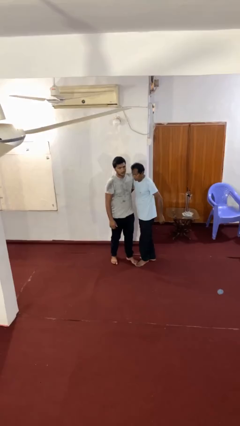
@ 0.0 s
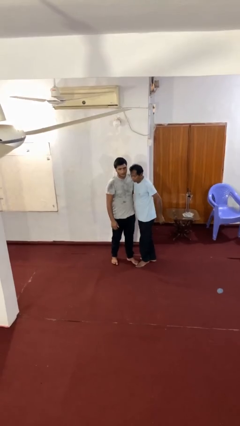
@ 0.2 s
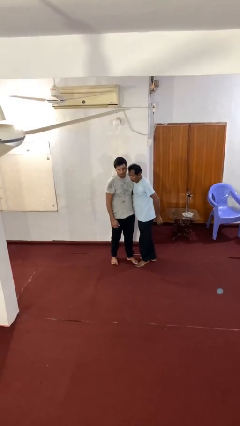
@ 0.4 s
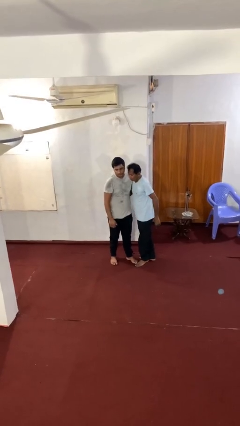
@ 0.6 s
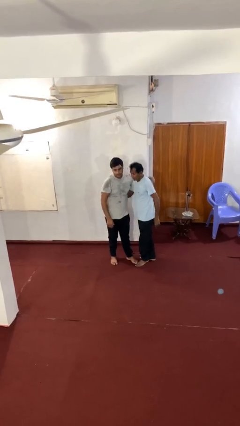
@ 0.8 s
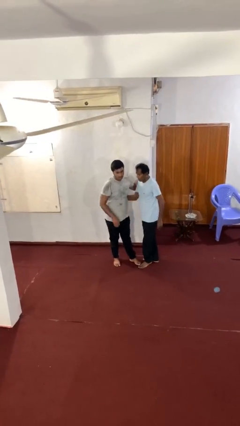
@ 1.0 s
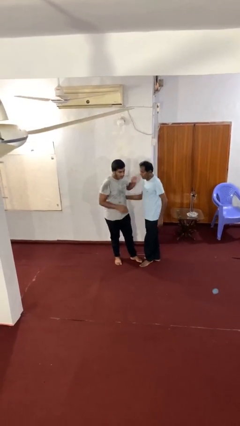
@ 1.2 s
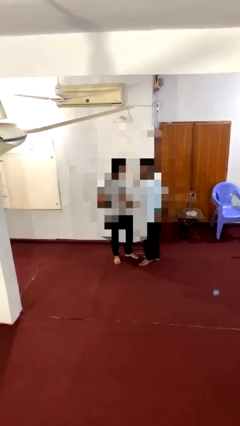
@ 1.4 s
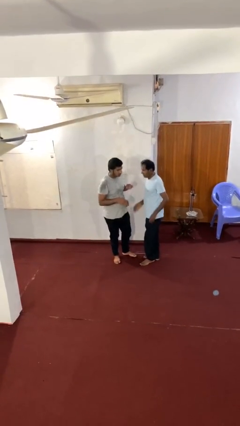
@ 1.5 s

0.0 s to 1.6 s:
person embraces person

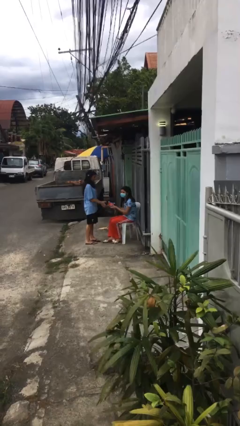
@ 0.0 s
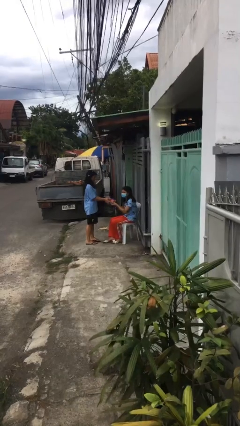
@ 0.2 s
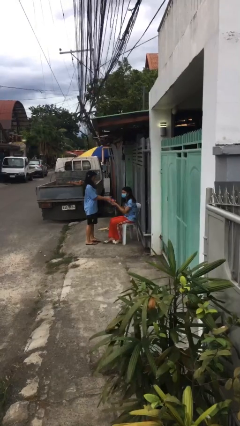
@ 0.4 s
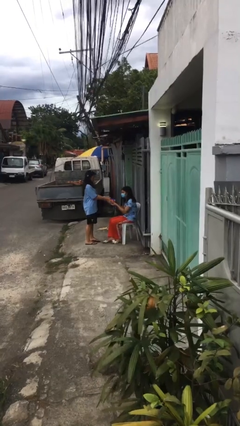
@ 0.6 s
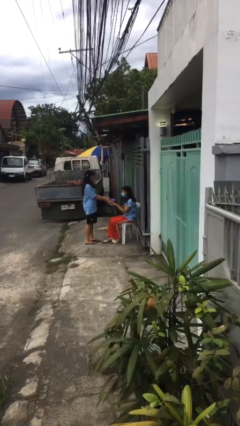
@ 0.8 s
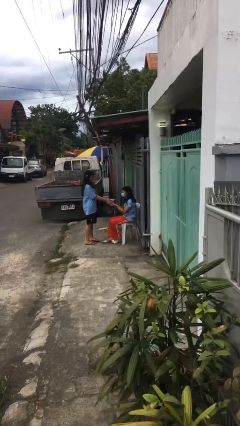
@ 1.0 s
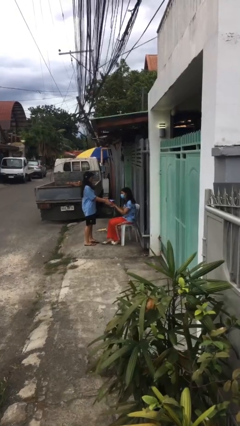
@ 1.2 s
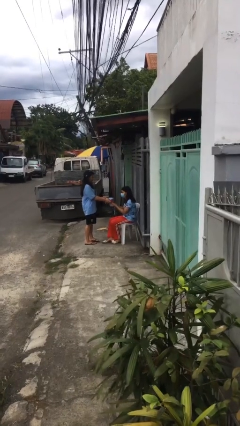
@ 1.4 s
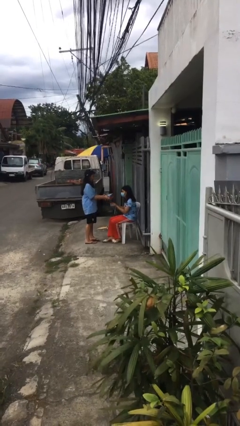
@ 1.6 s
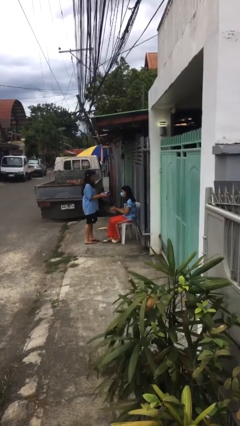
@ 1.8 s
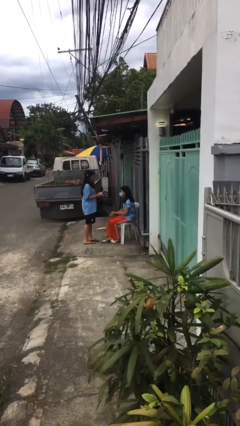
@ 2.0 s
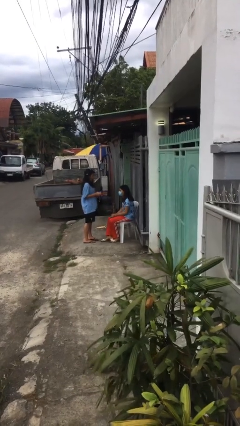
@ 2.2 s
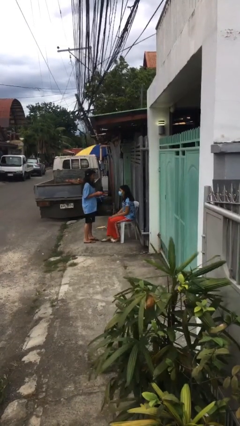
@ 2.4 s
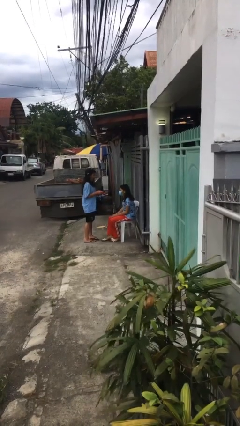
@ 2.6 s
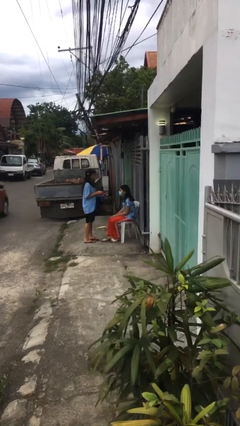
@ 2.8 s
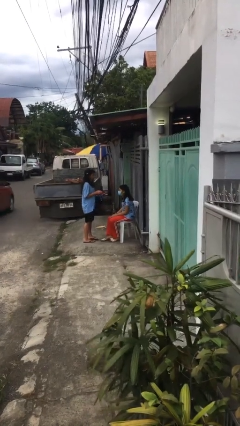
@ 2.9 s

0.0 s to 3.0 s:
person transfers object to person

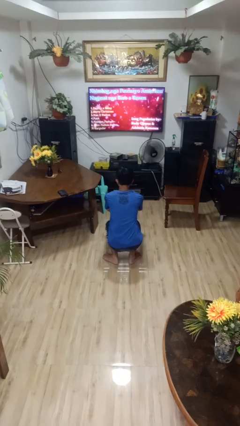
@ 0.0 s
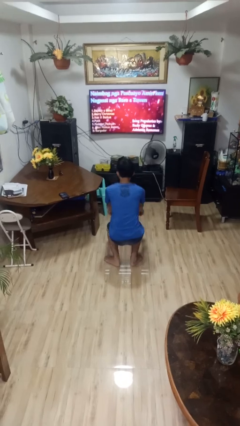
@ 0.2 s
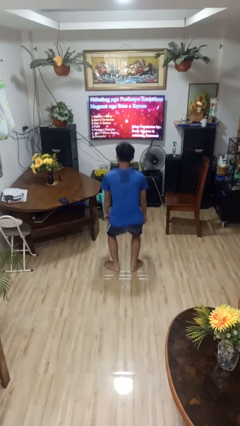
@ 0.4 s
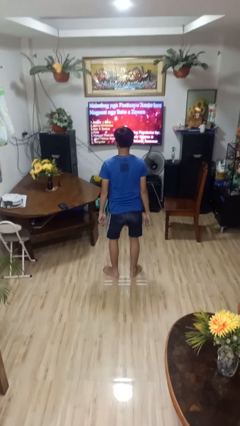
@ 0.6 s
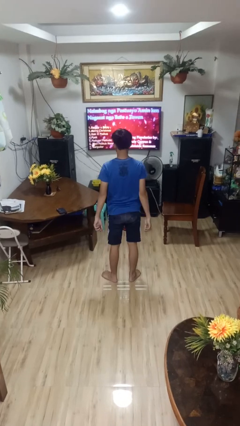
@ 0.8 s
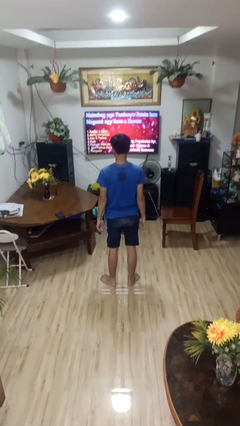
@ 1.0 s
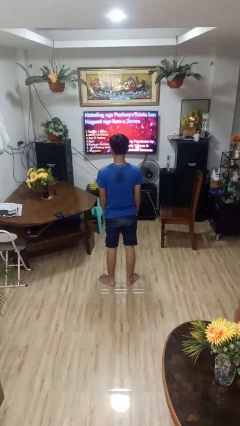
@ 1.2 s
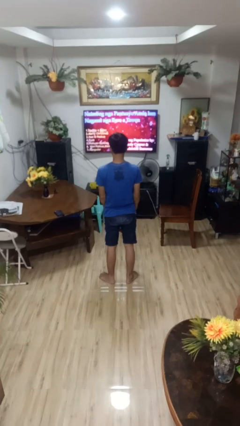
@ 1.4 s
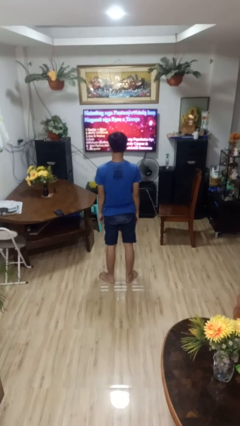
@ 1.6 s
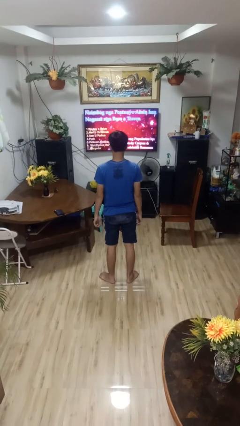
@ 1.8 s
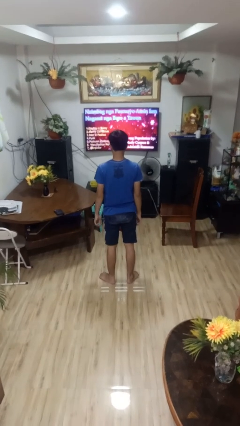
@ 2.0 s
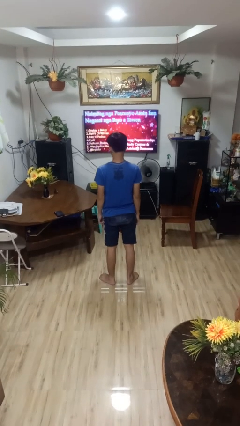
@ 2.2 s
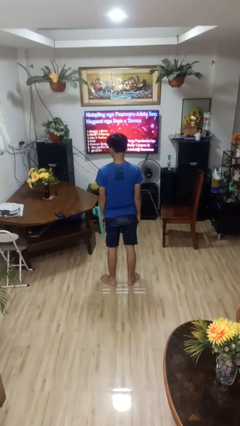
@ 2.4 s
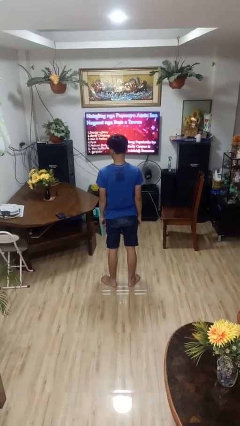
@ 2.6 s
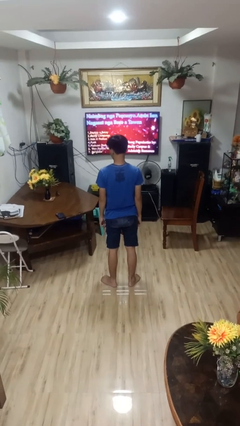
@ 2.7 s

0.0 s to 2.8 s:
person stands up

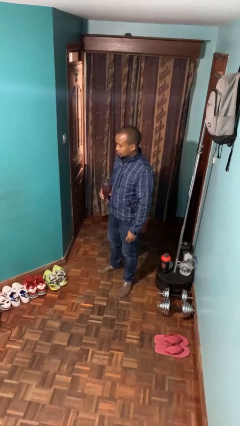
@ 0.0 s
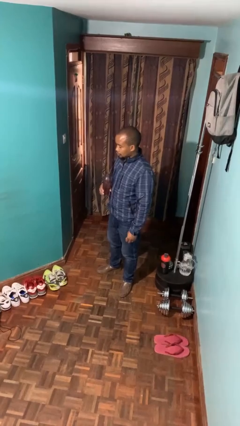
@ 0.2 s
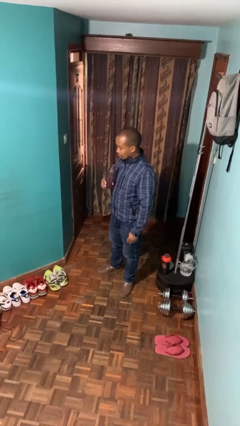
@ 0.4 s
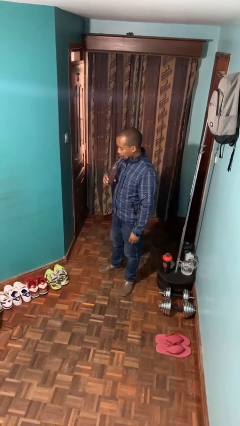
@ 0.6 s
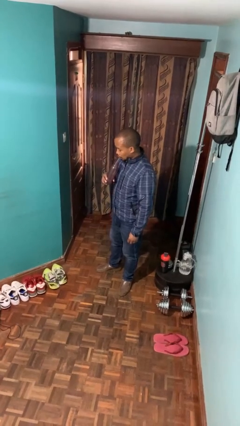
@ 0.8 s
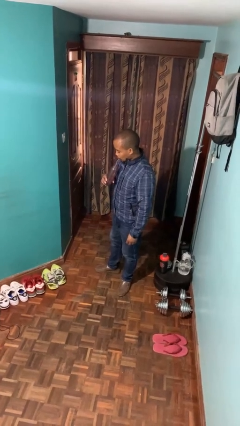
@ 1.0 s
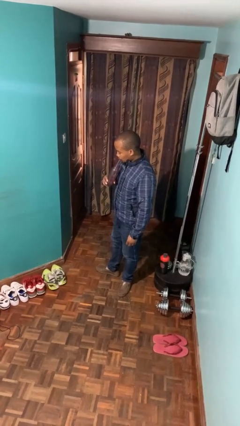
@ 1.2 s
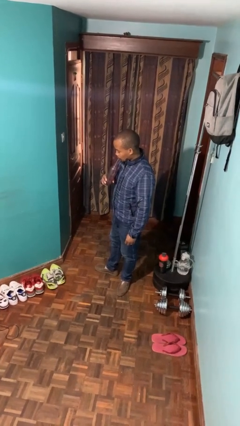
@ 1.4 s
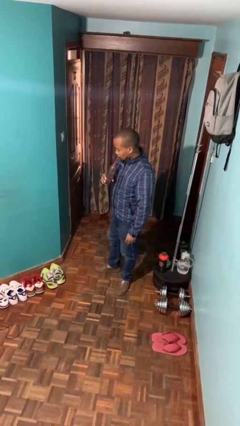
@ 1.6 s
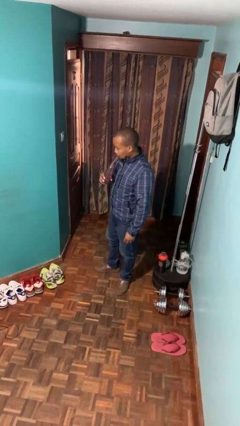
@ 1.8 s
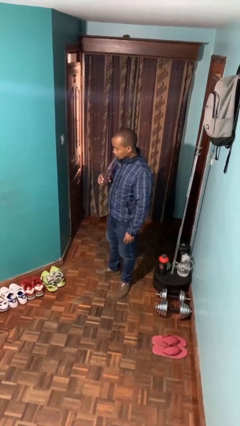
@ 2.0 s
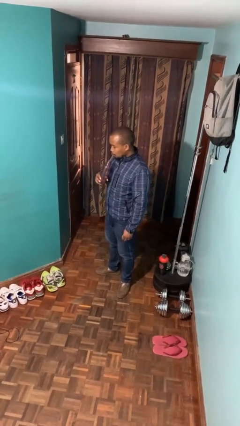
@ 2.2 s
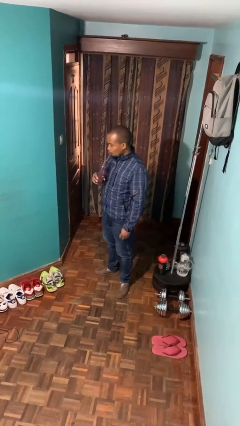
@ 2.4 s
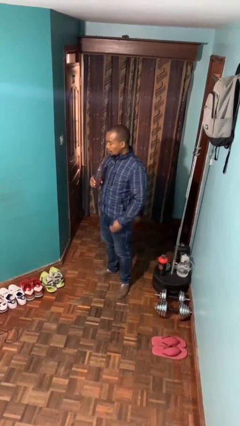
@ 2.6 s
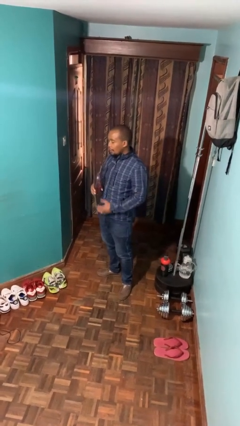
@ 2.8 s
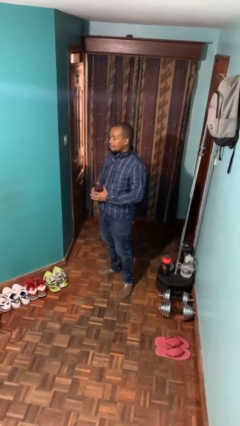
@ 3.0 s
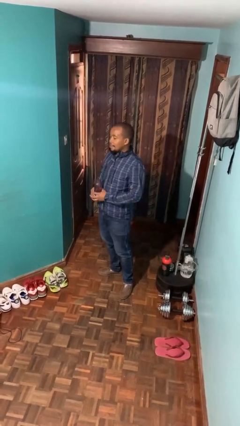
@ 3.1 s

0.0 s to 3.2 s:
person drinks from straw

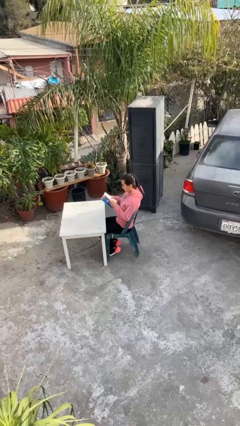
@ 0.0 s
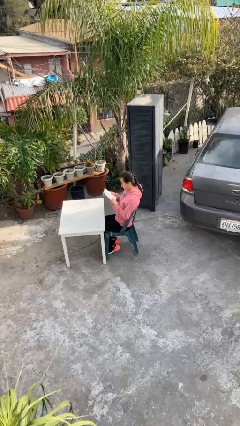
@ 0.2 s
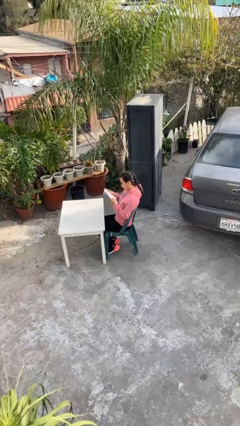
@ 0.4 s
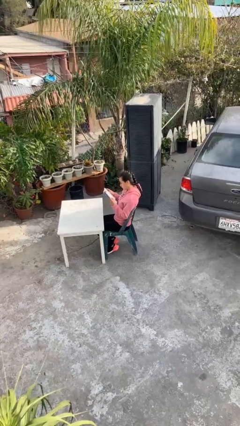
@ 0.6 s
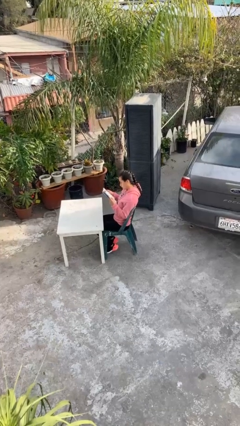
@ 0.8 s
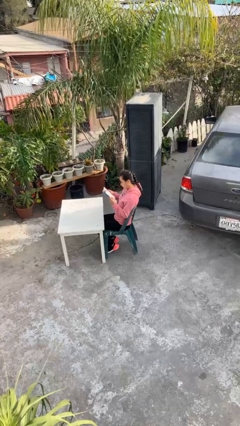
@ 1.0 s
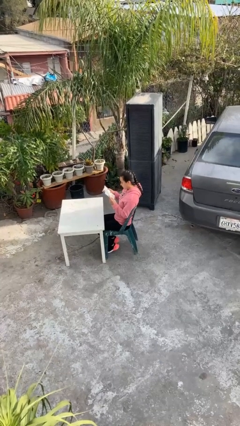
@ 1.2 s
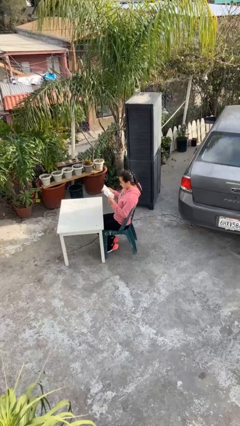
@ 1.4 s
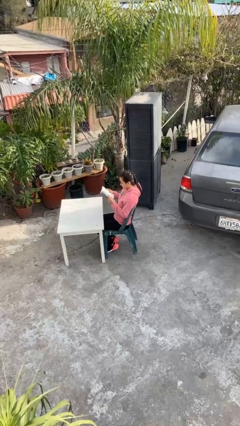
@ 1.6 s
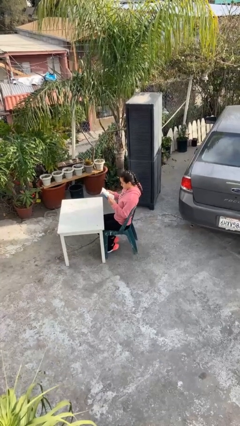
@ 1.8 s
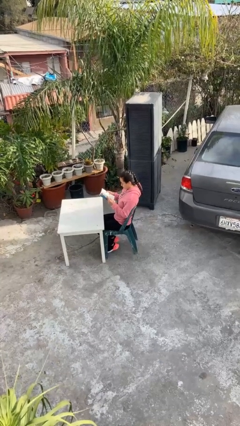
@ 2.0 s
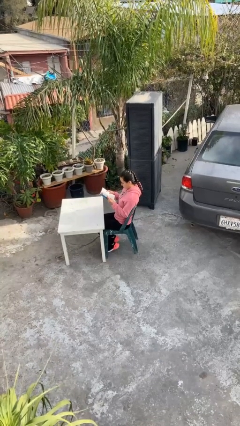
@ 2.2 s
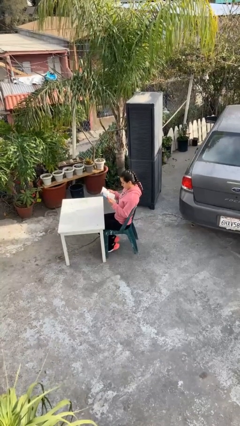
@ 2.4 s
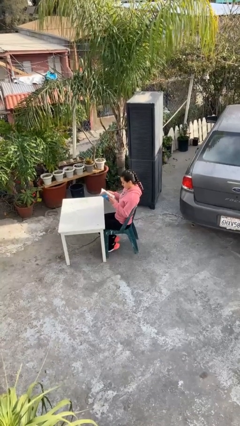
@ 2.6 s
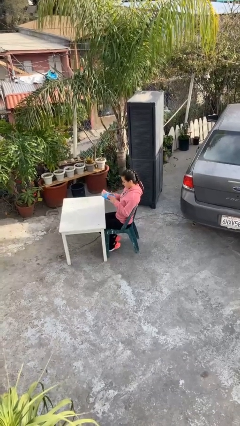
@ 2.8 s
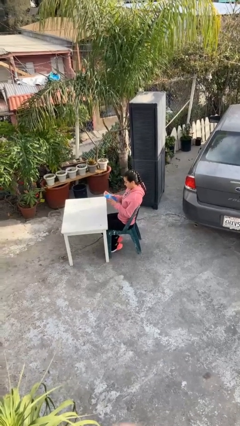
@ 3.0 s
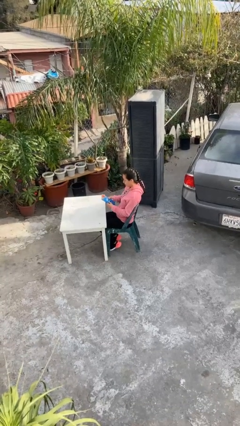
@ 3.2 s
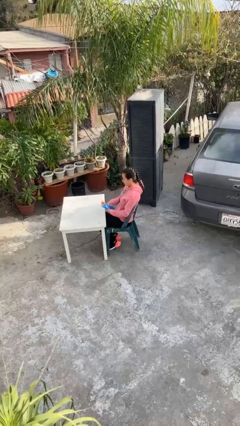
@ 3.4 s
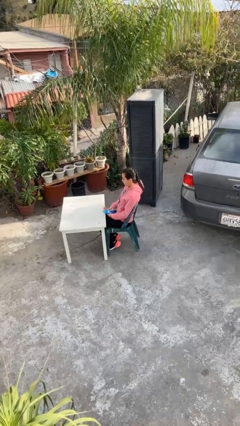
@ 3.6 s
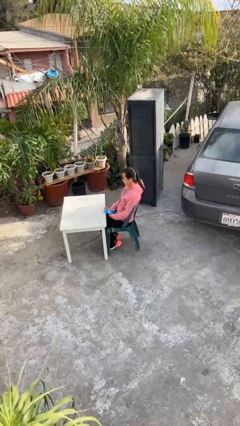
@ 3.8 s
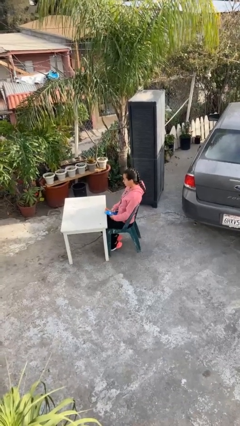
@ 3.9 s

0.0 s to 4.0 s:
person reads document

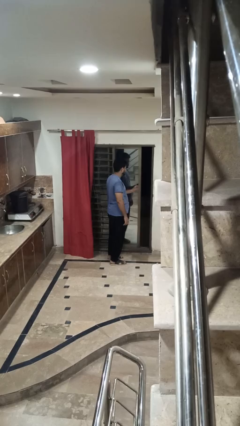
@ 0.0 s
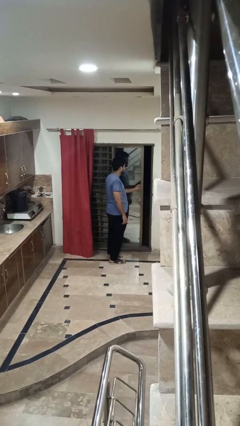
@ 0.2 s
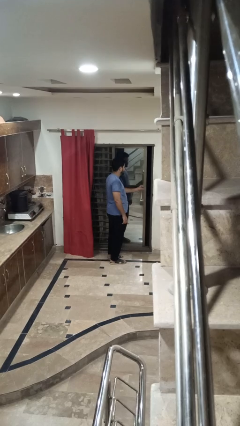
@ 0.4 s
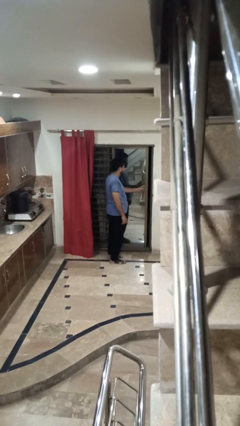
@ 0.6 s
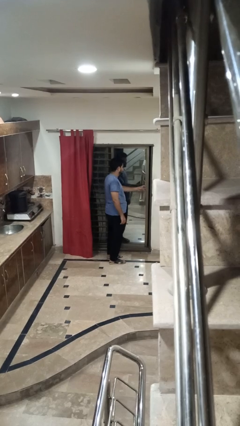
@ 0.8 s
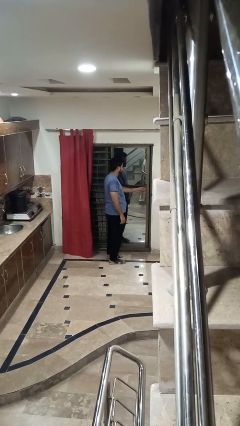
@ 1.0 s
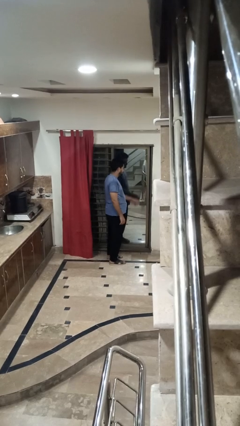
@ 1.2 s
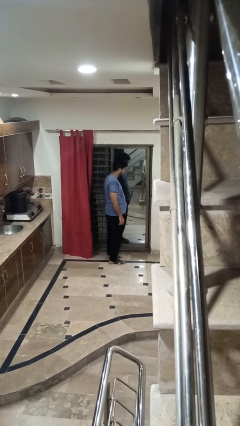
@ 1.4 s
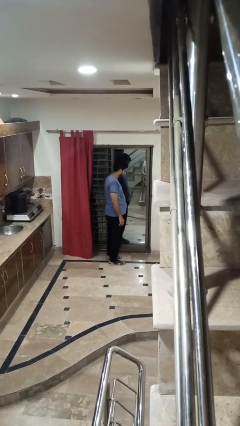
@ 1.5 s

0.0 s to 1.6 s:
person closes sliding door

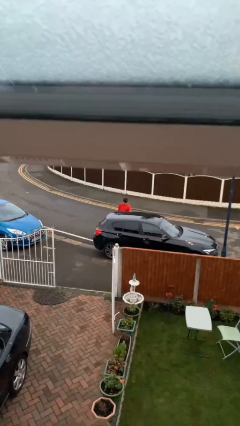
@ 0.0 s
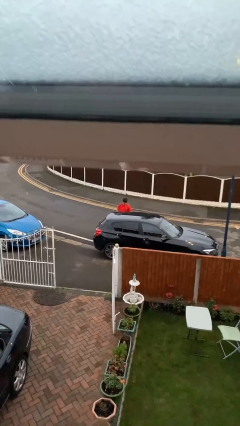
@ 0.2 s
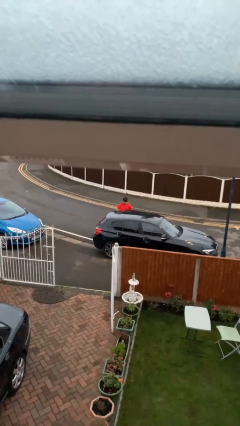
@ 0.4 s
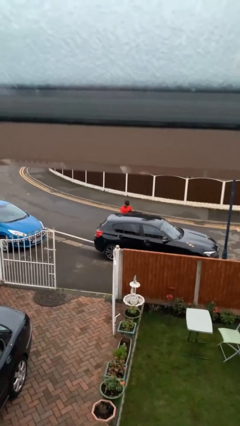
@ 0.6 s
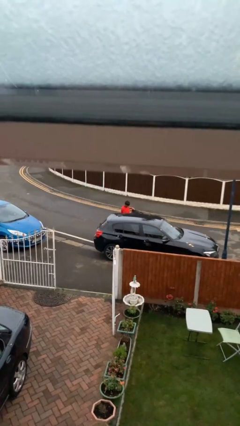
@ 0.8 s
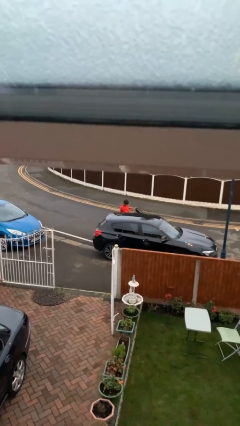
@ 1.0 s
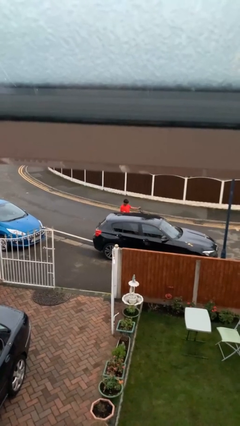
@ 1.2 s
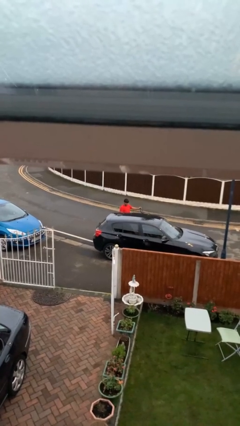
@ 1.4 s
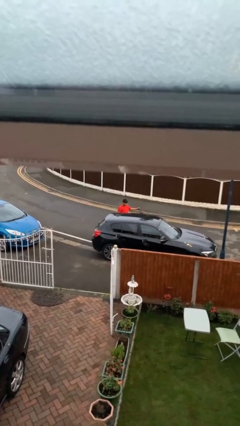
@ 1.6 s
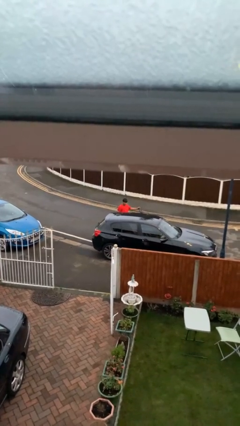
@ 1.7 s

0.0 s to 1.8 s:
person opens car door
